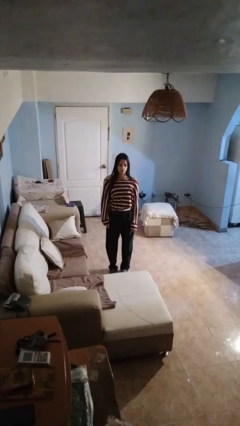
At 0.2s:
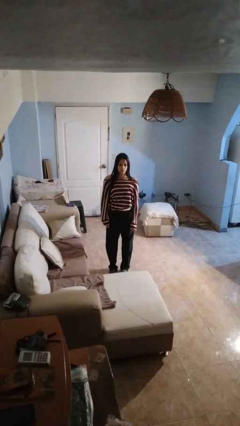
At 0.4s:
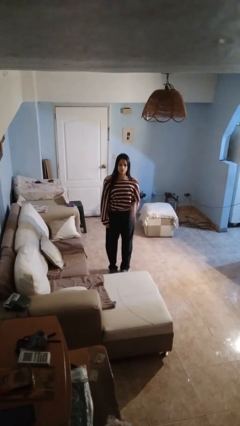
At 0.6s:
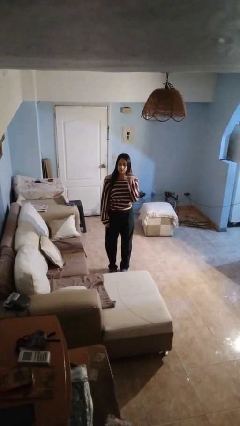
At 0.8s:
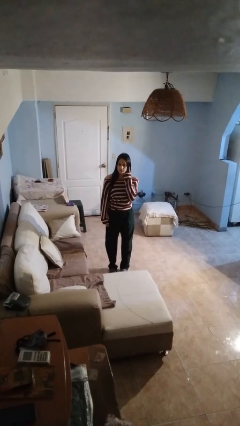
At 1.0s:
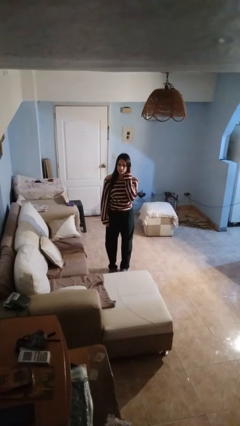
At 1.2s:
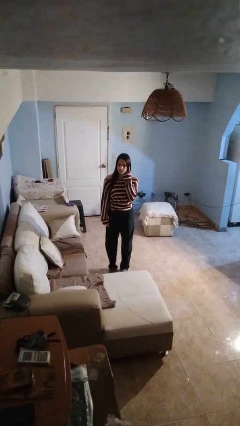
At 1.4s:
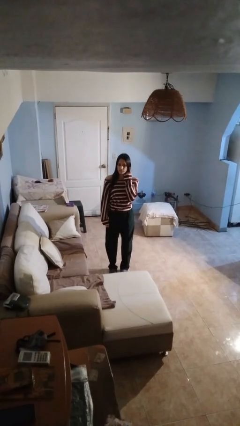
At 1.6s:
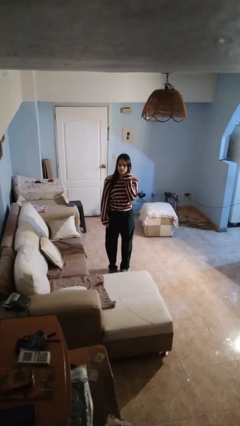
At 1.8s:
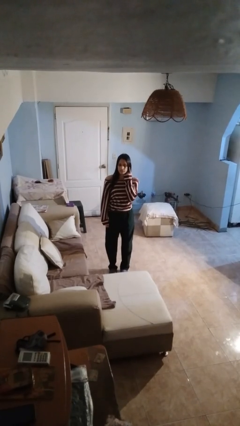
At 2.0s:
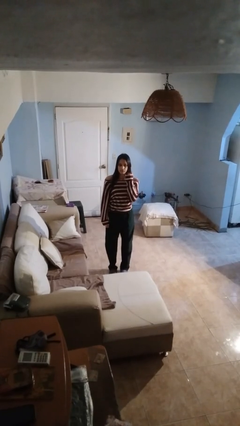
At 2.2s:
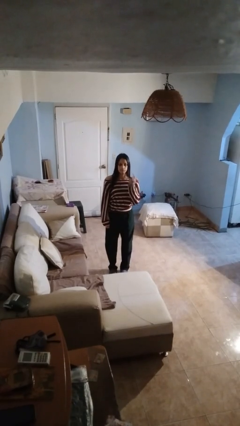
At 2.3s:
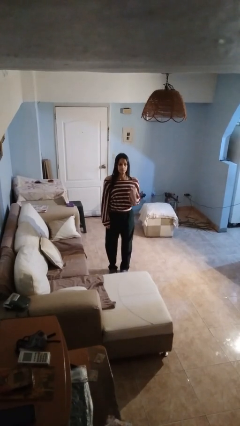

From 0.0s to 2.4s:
person gestures listen closely

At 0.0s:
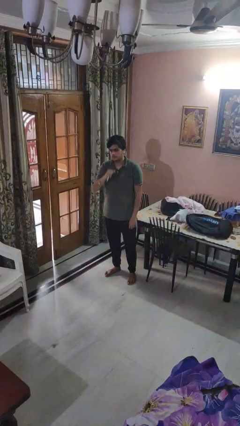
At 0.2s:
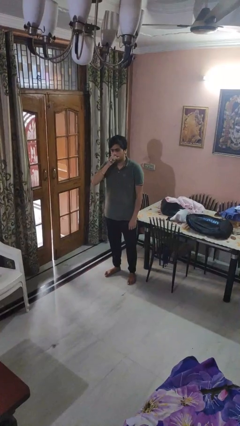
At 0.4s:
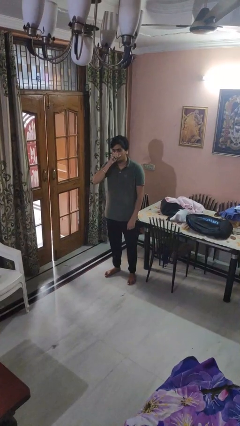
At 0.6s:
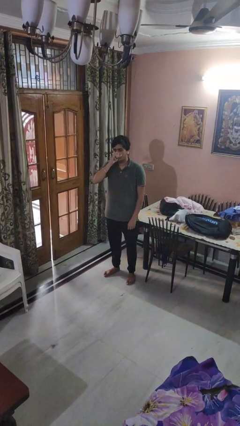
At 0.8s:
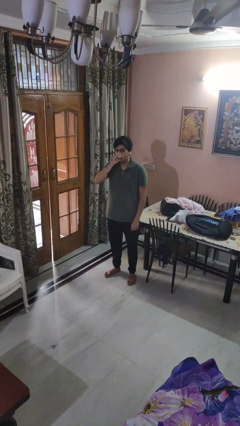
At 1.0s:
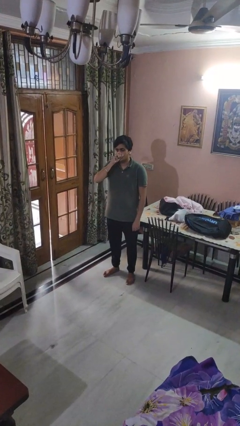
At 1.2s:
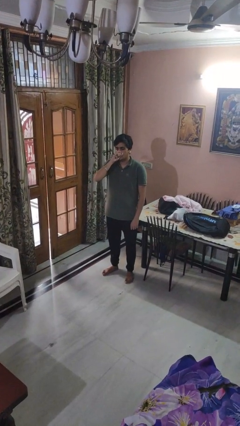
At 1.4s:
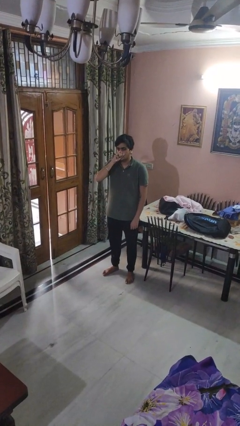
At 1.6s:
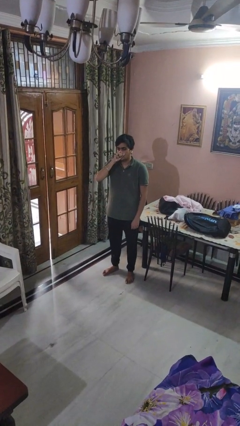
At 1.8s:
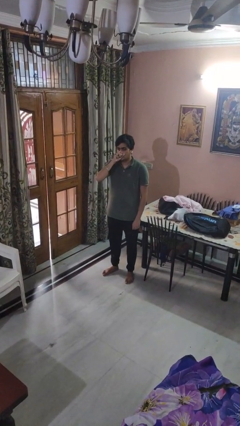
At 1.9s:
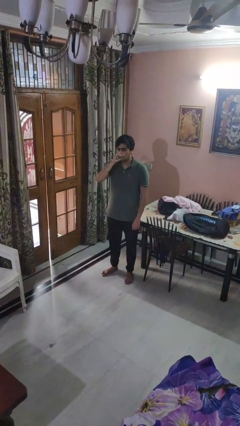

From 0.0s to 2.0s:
person vapes

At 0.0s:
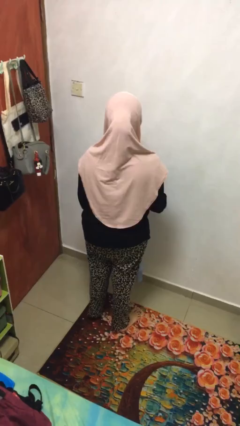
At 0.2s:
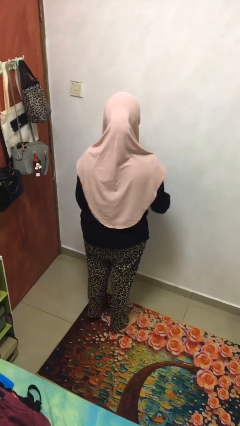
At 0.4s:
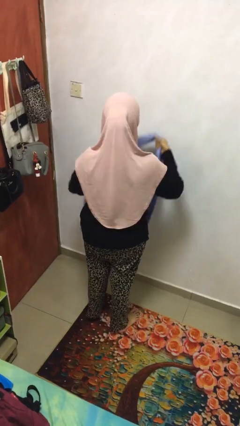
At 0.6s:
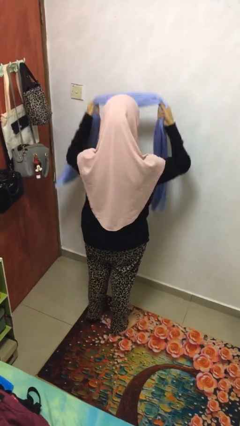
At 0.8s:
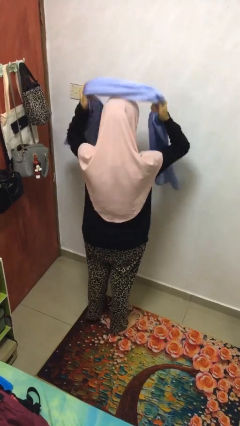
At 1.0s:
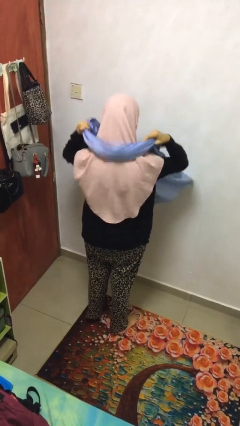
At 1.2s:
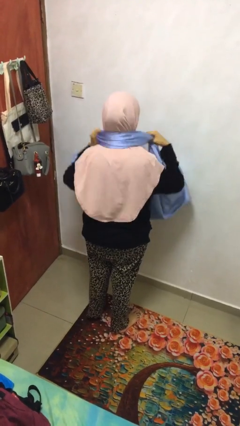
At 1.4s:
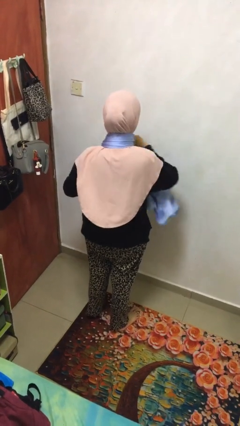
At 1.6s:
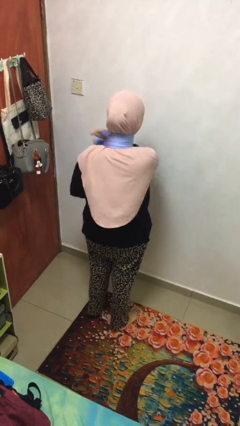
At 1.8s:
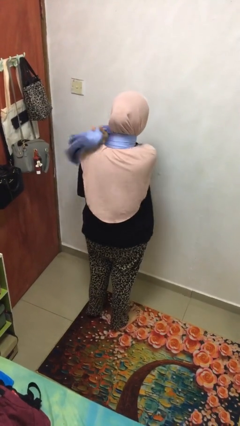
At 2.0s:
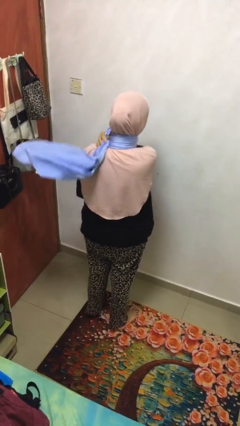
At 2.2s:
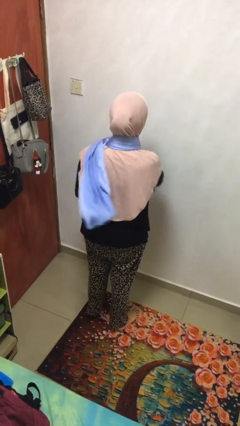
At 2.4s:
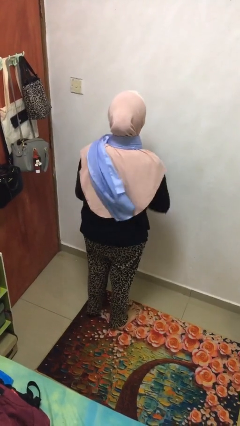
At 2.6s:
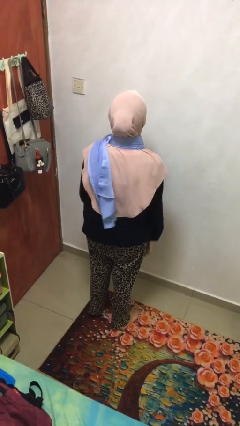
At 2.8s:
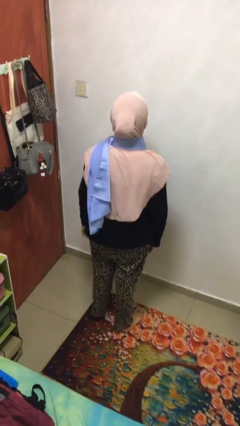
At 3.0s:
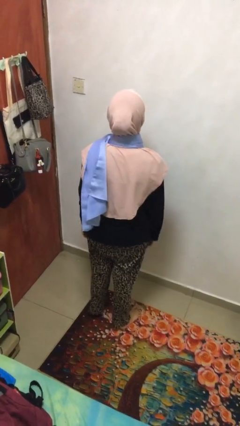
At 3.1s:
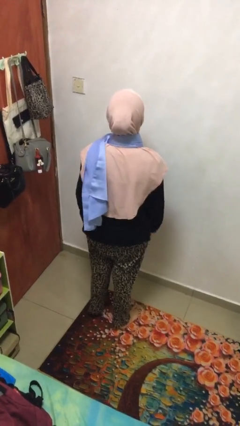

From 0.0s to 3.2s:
person puts on scarf

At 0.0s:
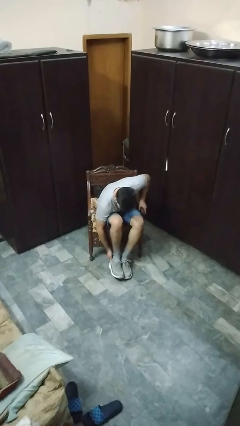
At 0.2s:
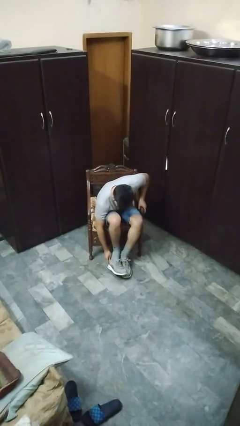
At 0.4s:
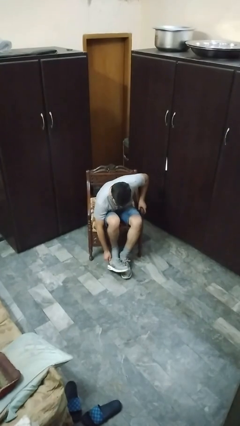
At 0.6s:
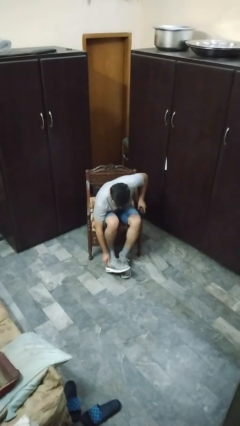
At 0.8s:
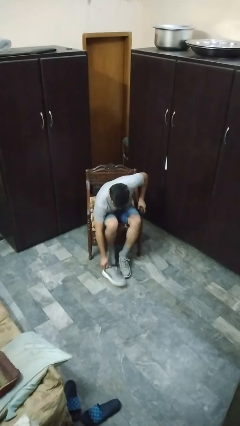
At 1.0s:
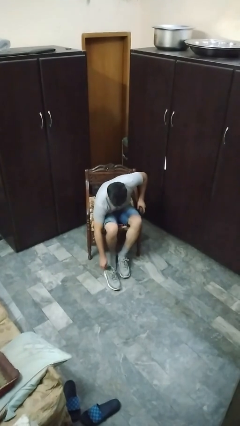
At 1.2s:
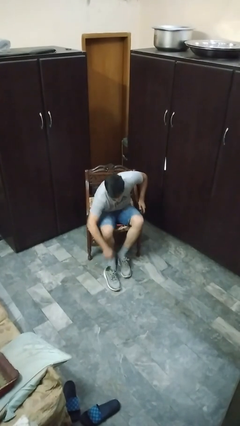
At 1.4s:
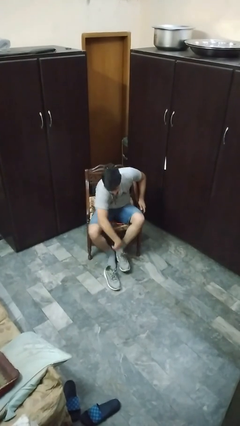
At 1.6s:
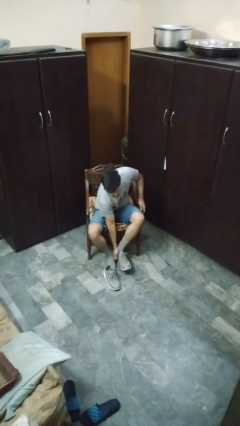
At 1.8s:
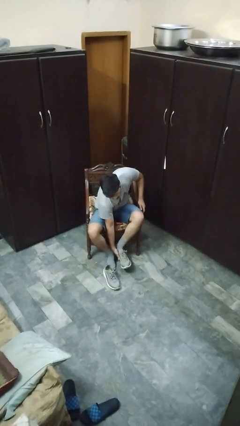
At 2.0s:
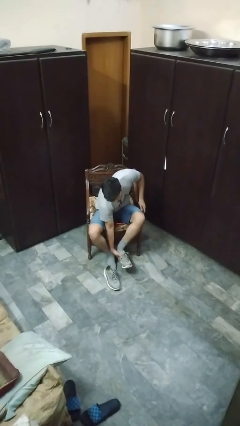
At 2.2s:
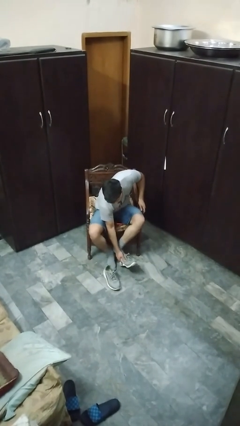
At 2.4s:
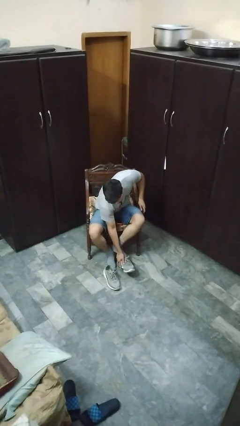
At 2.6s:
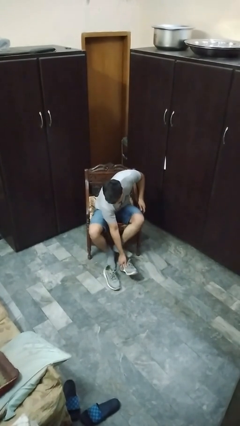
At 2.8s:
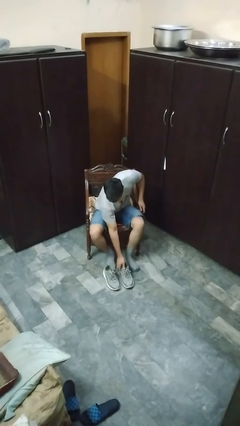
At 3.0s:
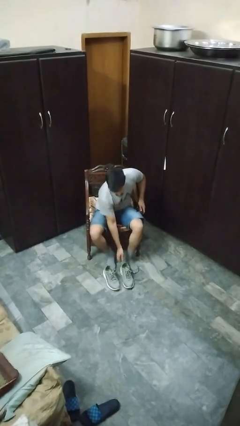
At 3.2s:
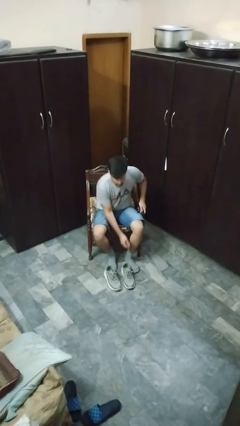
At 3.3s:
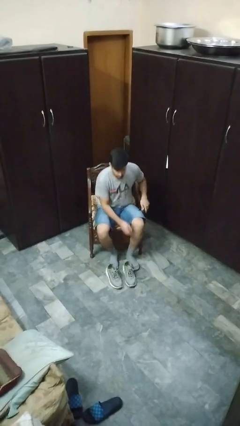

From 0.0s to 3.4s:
person takes off shoes

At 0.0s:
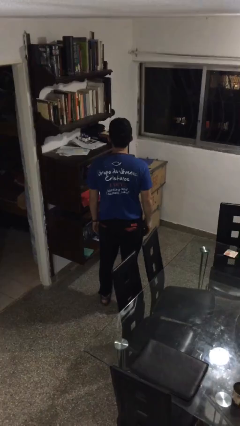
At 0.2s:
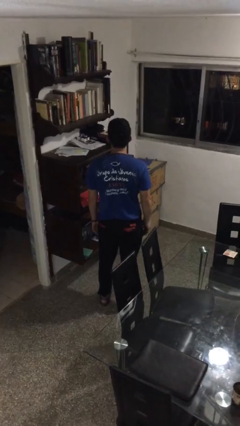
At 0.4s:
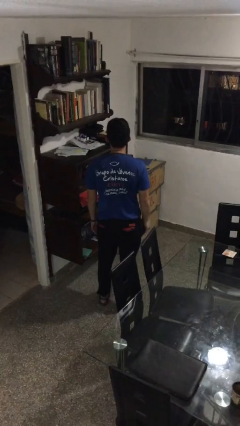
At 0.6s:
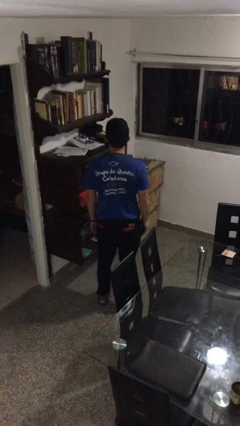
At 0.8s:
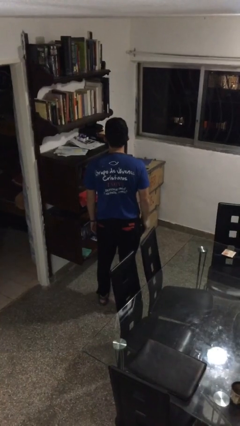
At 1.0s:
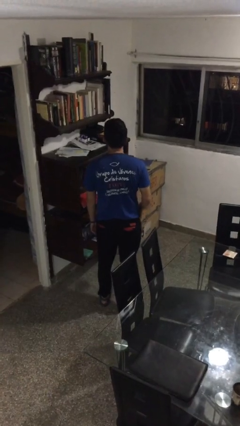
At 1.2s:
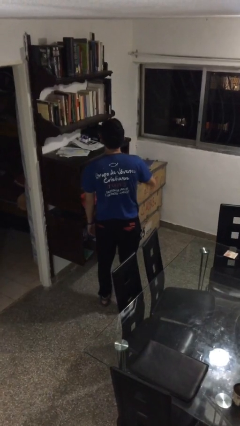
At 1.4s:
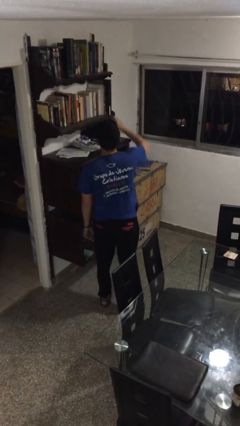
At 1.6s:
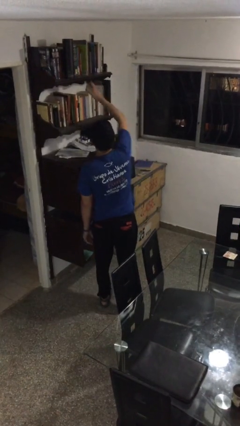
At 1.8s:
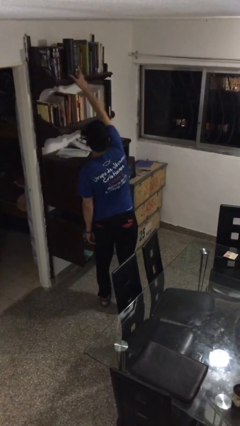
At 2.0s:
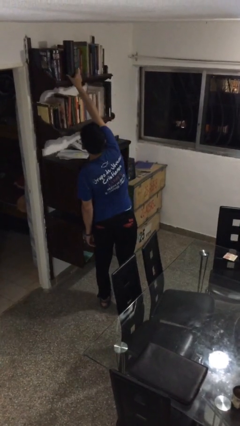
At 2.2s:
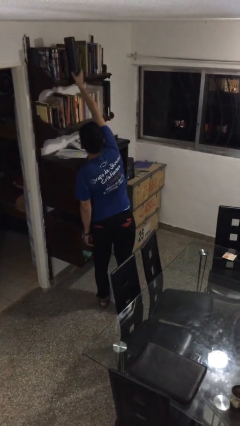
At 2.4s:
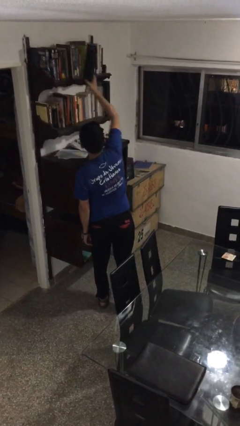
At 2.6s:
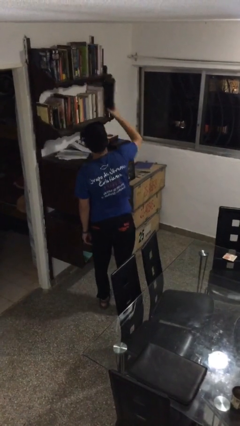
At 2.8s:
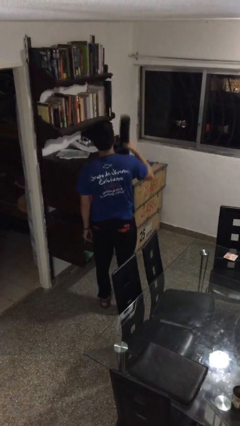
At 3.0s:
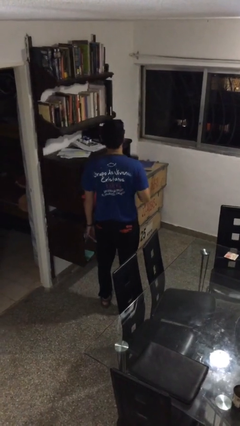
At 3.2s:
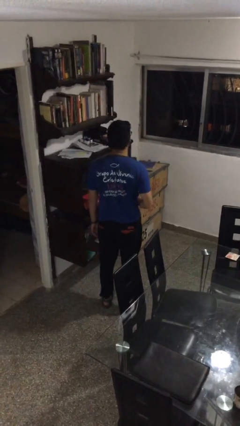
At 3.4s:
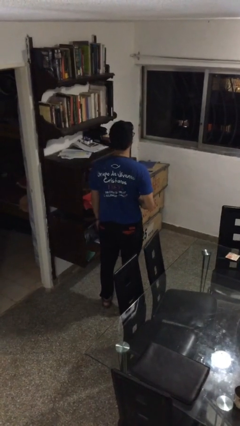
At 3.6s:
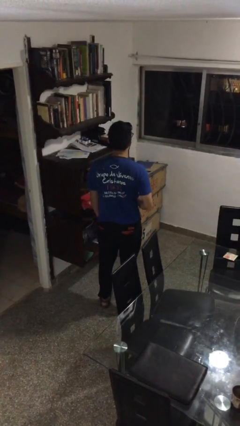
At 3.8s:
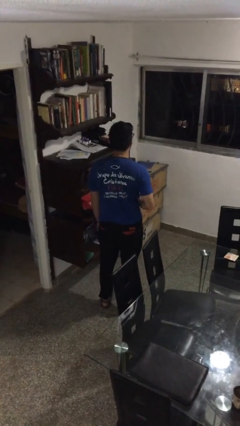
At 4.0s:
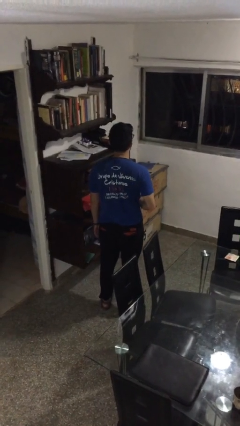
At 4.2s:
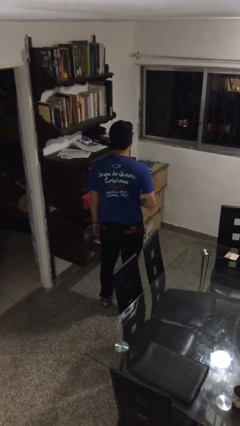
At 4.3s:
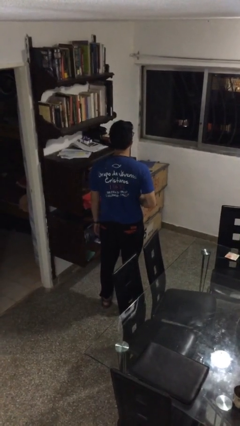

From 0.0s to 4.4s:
person picks up object from shelf

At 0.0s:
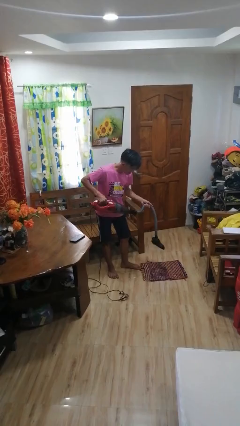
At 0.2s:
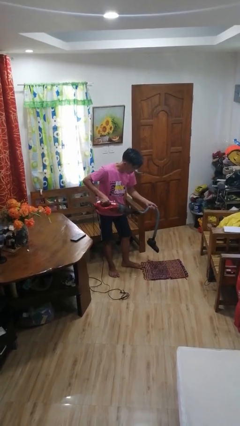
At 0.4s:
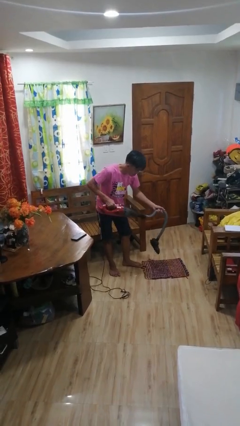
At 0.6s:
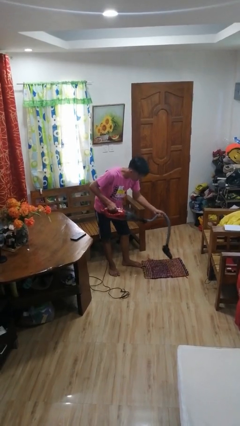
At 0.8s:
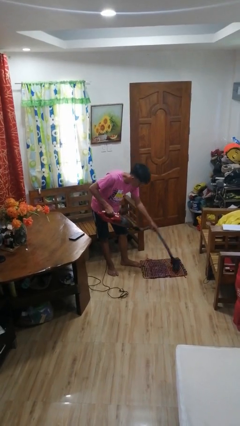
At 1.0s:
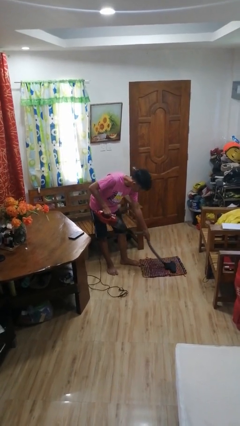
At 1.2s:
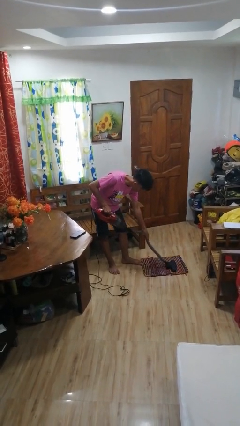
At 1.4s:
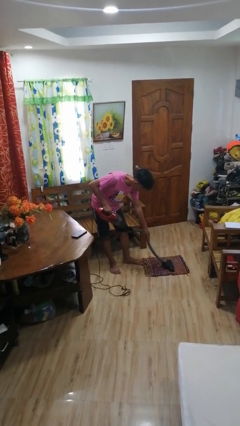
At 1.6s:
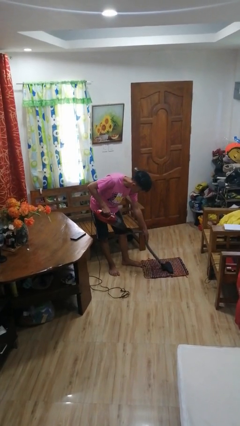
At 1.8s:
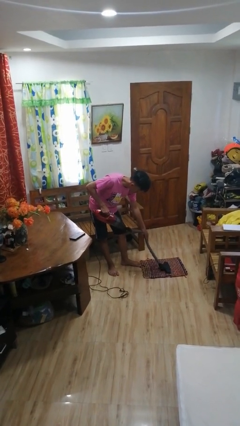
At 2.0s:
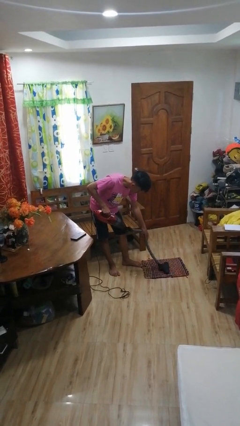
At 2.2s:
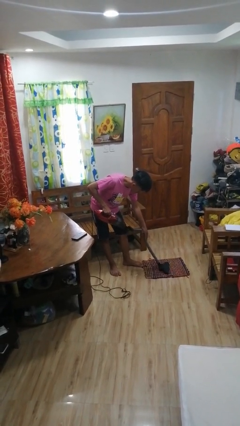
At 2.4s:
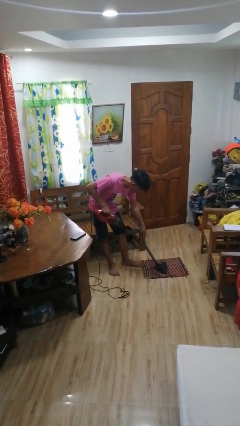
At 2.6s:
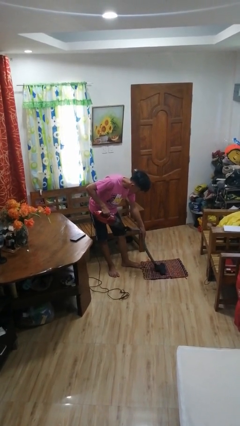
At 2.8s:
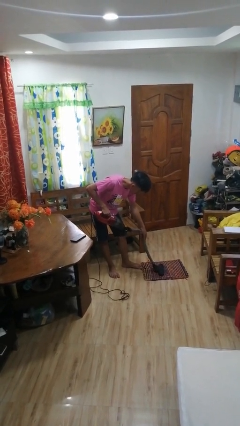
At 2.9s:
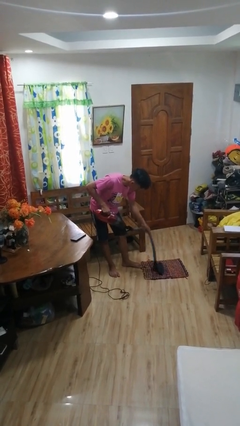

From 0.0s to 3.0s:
person vacuums carpet
